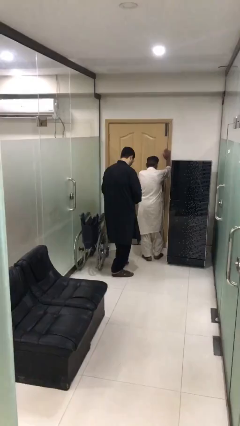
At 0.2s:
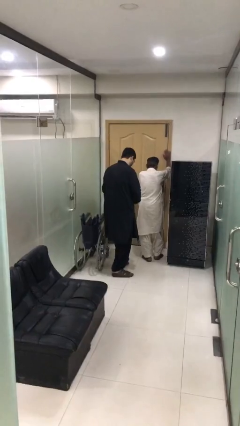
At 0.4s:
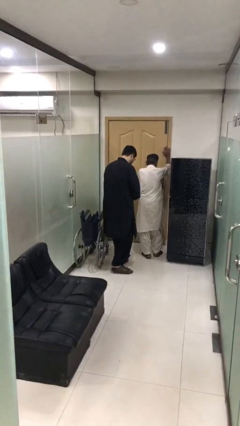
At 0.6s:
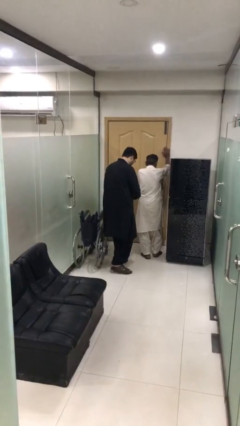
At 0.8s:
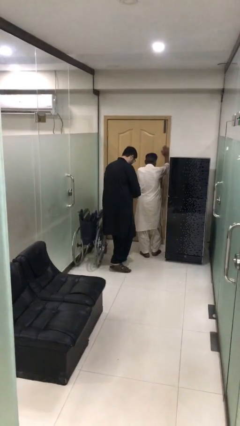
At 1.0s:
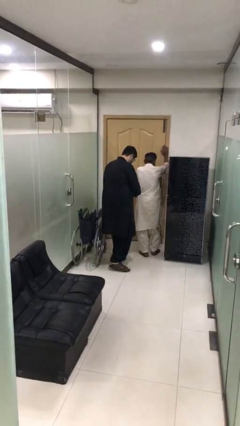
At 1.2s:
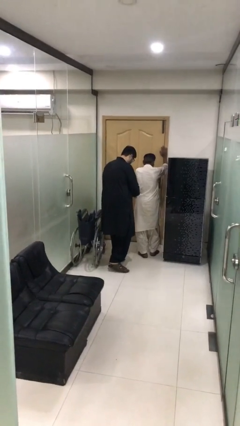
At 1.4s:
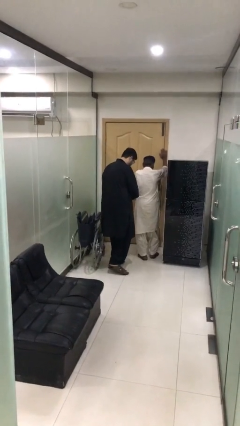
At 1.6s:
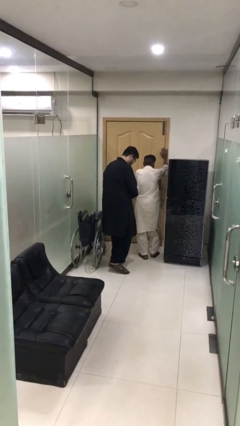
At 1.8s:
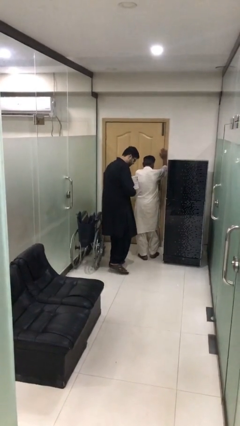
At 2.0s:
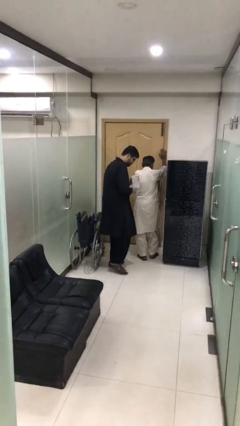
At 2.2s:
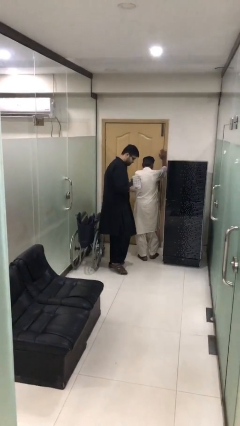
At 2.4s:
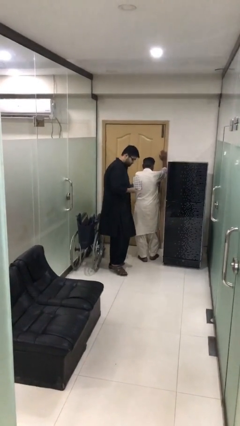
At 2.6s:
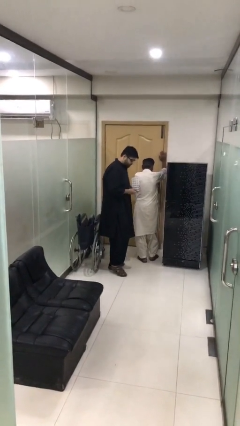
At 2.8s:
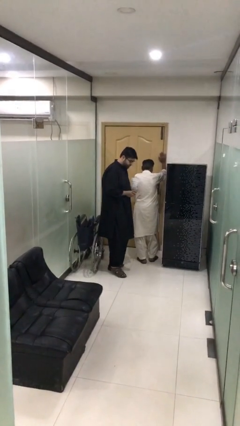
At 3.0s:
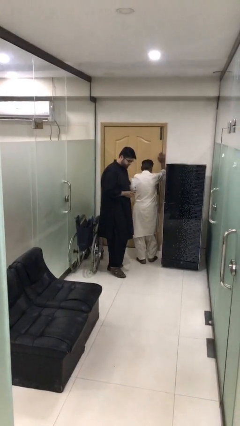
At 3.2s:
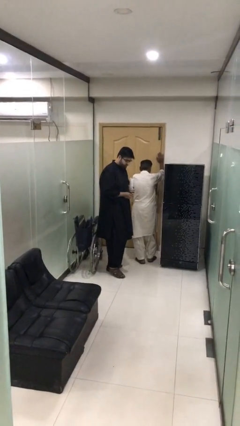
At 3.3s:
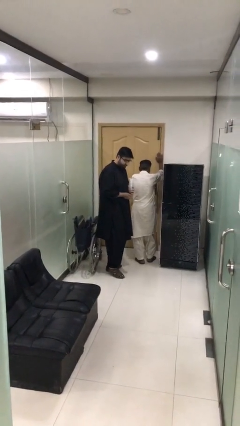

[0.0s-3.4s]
person steals object from person

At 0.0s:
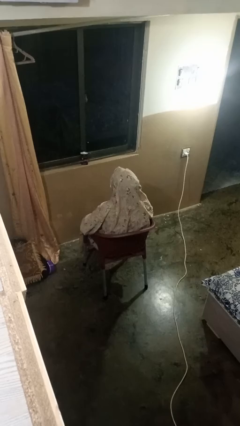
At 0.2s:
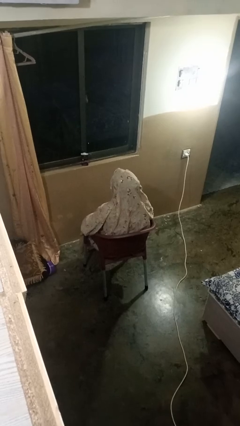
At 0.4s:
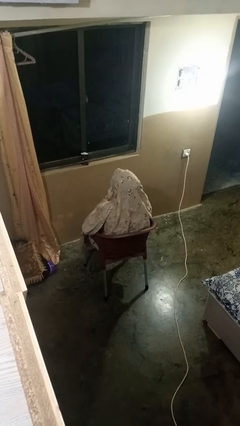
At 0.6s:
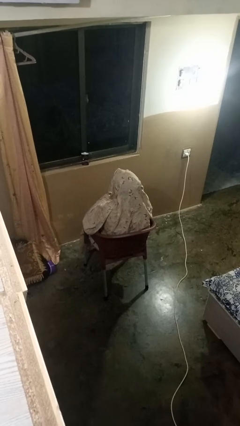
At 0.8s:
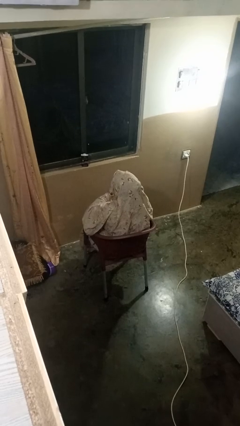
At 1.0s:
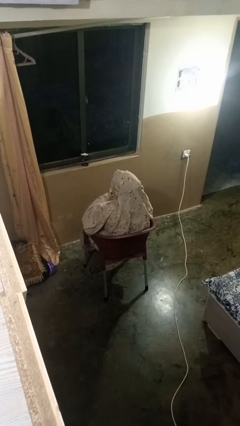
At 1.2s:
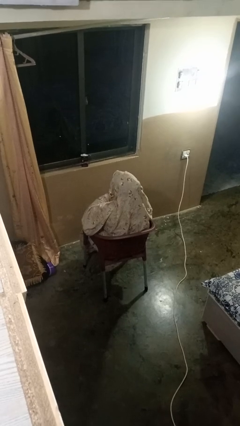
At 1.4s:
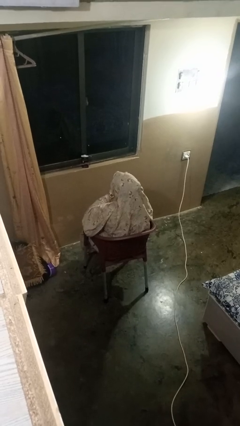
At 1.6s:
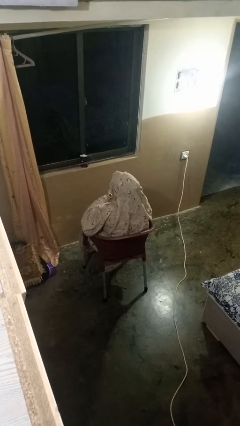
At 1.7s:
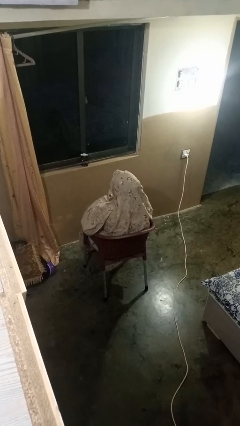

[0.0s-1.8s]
person looks at wristwatch

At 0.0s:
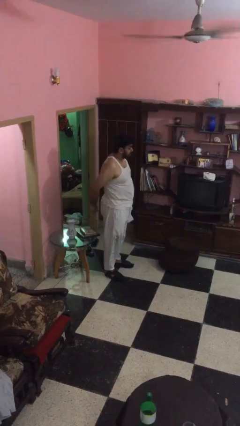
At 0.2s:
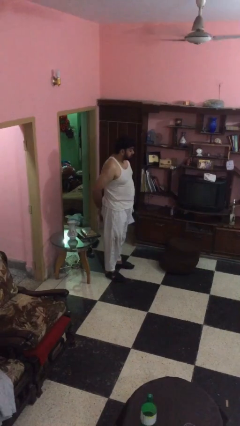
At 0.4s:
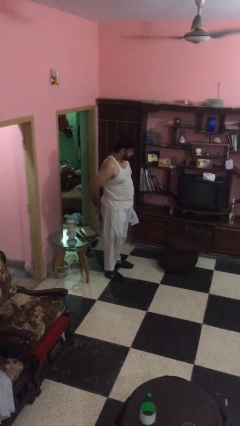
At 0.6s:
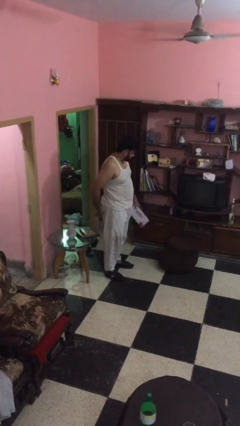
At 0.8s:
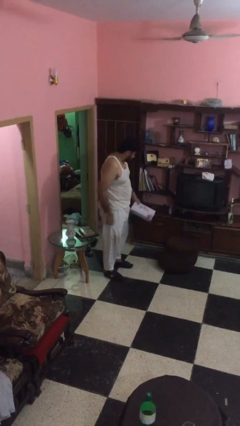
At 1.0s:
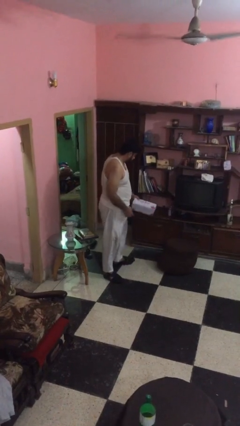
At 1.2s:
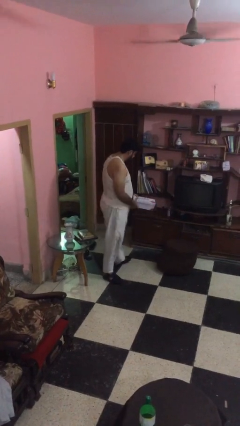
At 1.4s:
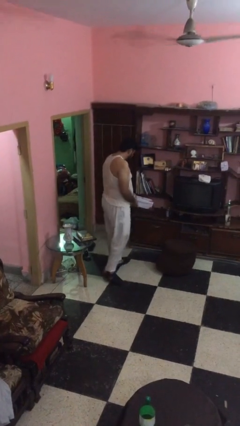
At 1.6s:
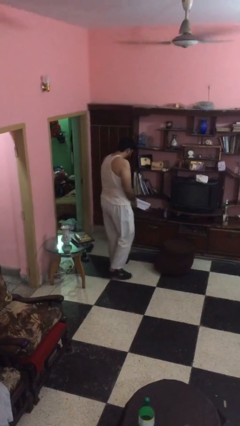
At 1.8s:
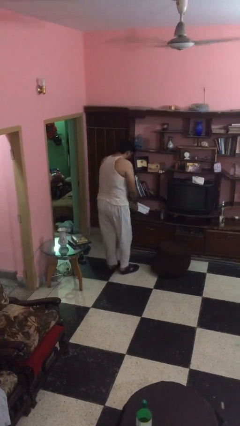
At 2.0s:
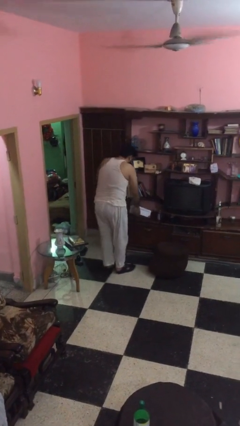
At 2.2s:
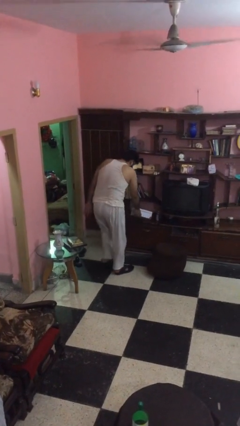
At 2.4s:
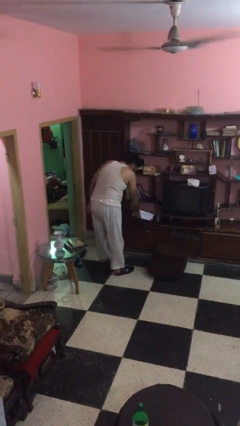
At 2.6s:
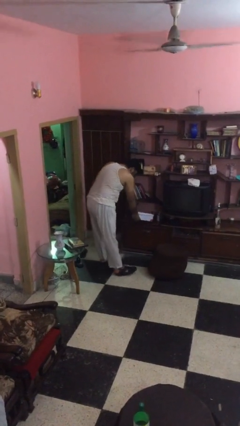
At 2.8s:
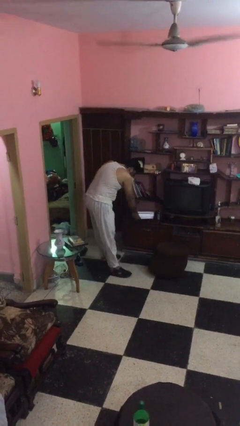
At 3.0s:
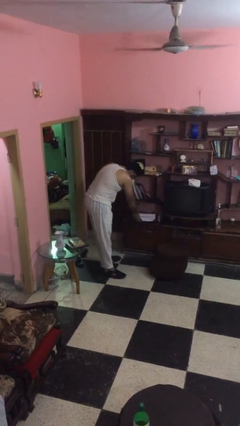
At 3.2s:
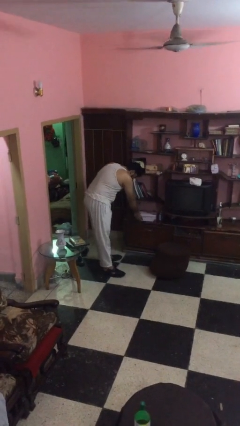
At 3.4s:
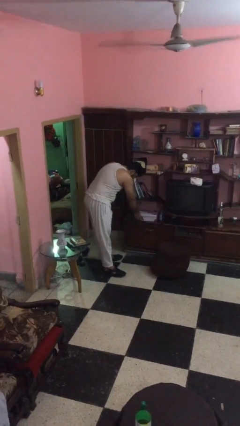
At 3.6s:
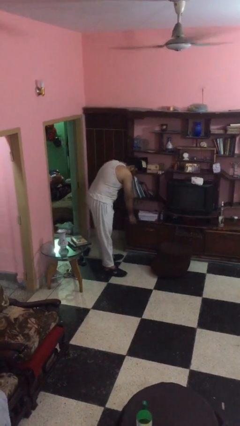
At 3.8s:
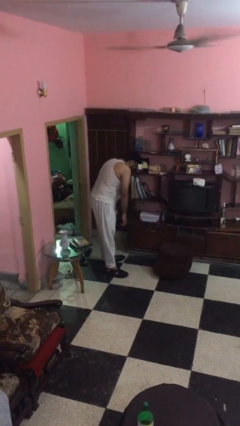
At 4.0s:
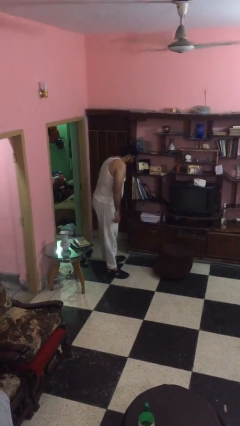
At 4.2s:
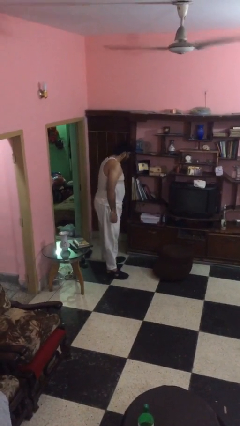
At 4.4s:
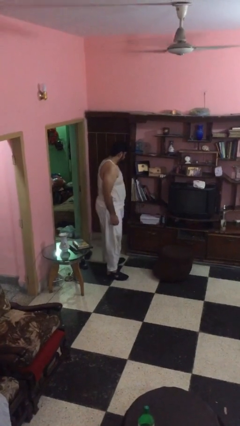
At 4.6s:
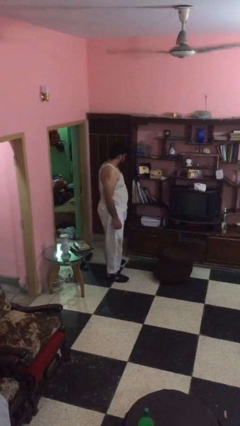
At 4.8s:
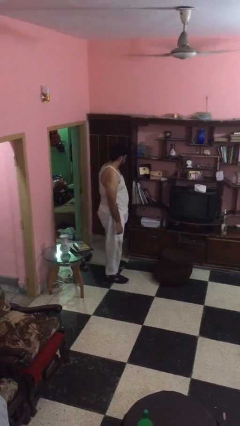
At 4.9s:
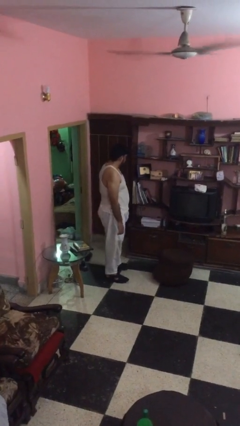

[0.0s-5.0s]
person puts down object on table

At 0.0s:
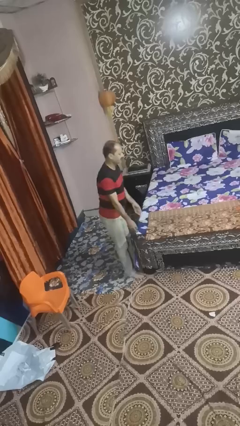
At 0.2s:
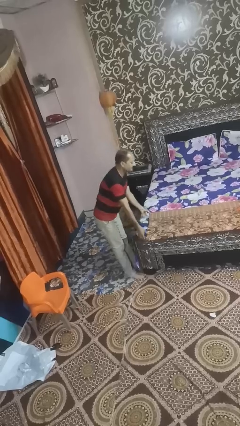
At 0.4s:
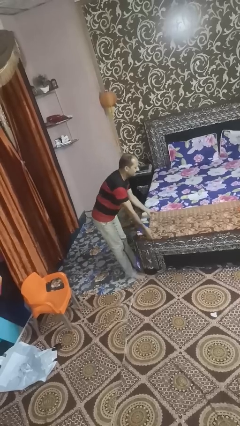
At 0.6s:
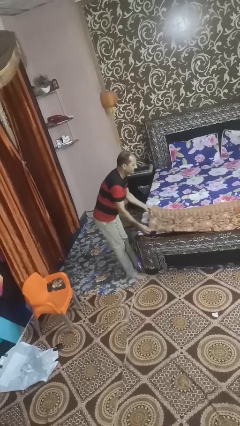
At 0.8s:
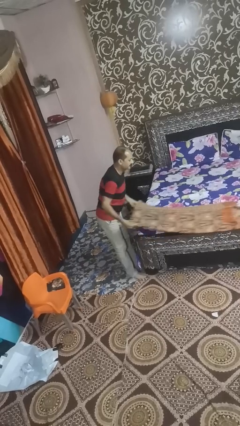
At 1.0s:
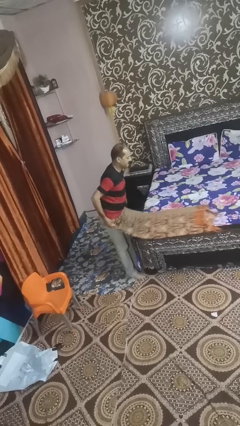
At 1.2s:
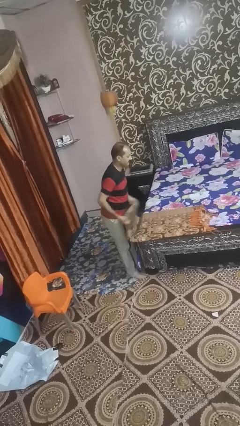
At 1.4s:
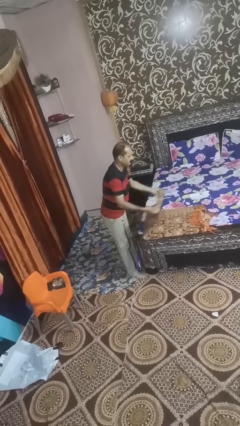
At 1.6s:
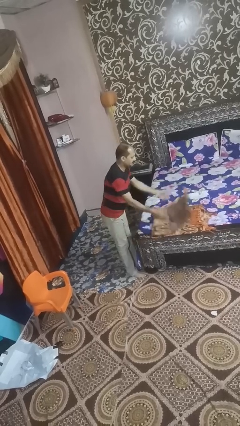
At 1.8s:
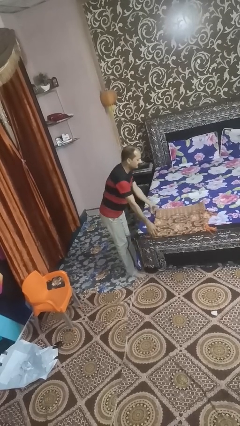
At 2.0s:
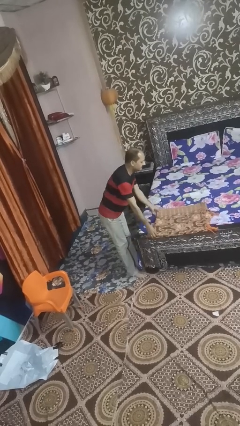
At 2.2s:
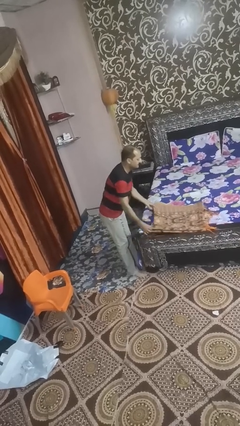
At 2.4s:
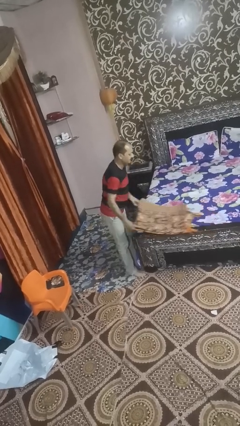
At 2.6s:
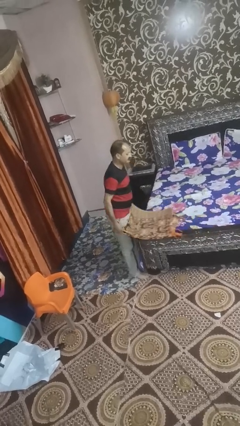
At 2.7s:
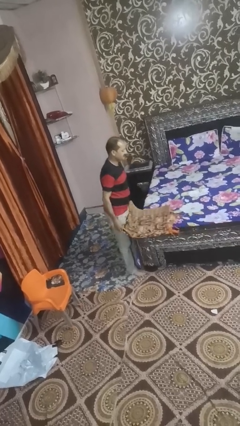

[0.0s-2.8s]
person folds blanket

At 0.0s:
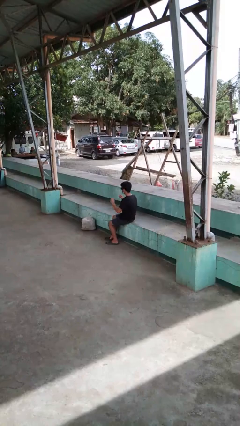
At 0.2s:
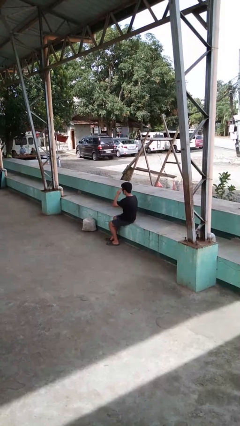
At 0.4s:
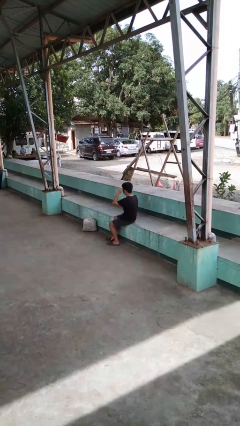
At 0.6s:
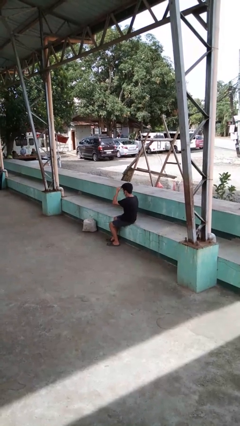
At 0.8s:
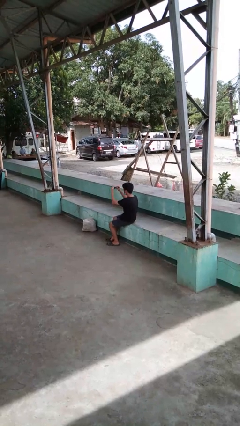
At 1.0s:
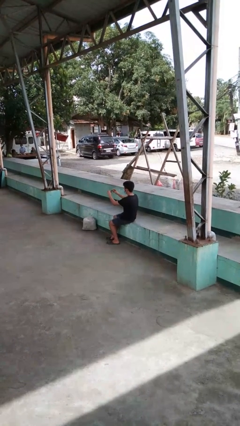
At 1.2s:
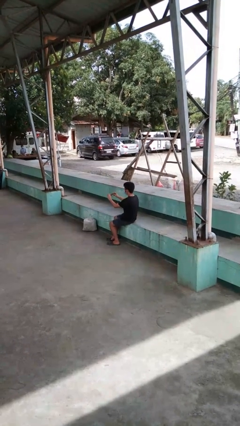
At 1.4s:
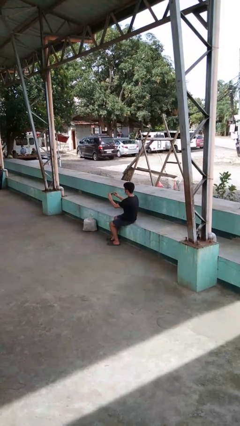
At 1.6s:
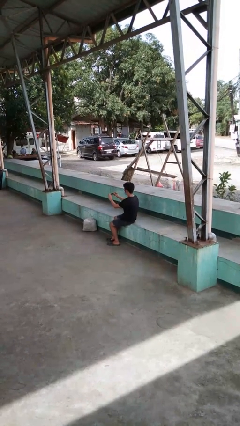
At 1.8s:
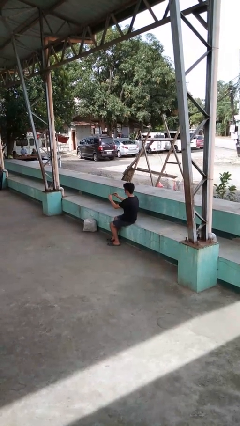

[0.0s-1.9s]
person brushes hair

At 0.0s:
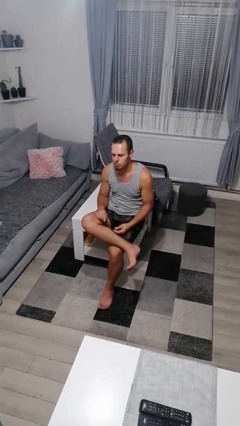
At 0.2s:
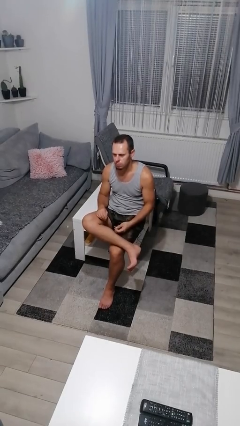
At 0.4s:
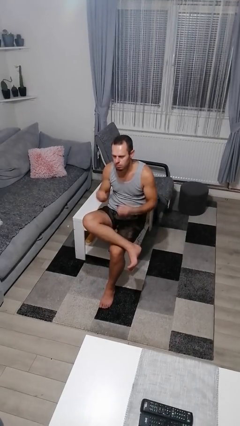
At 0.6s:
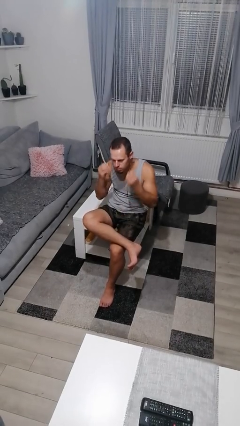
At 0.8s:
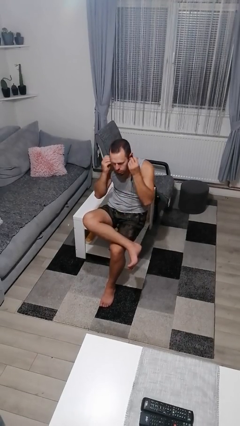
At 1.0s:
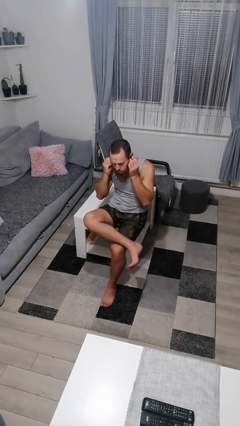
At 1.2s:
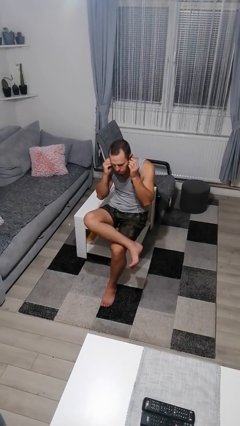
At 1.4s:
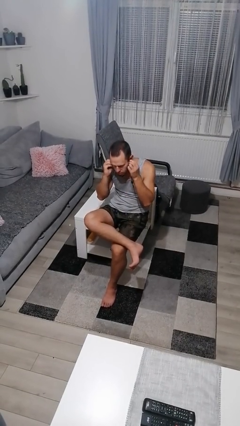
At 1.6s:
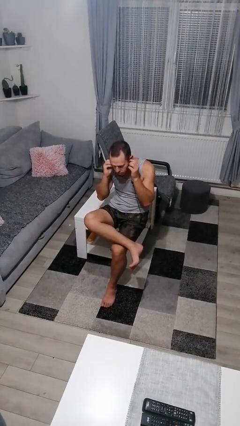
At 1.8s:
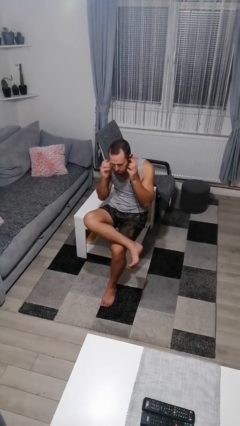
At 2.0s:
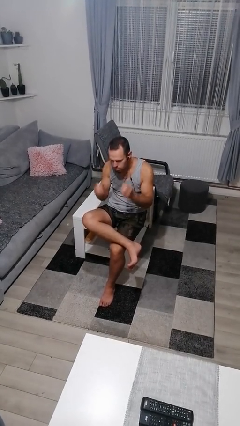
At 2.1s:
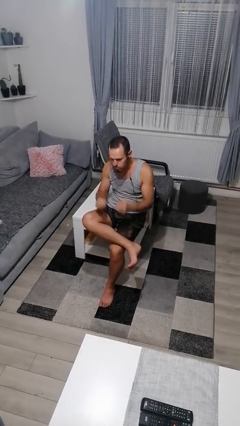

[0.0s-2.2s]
person puts on headphones

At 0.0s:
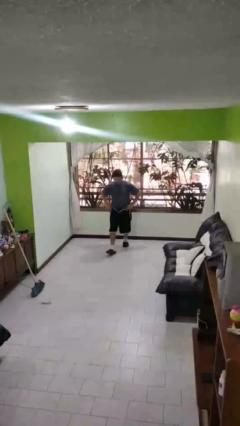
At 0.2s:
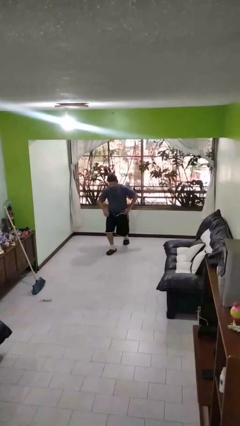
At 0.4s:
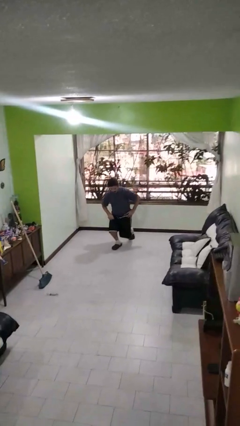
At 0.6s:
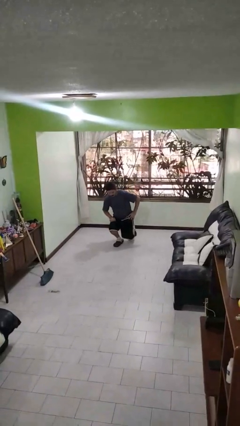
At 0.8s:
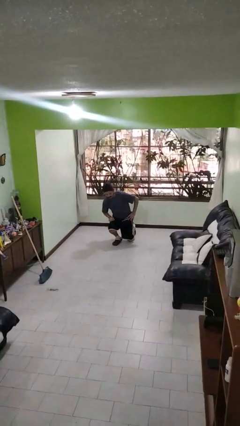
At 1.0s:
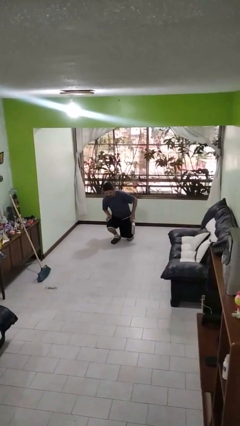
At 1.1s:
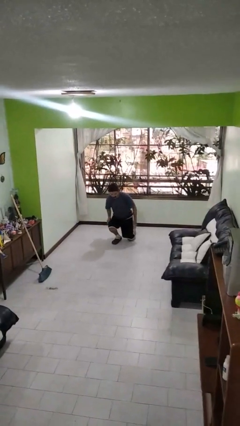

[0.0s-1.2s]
person kneels
